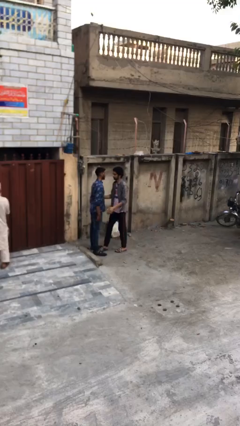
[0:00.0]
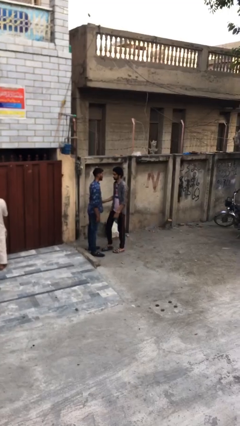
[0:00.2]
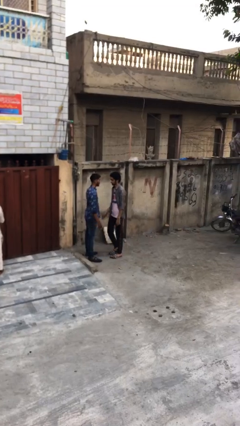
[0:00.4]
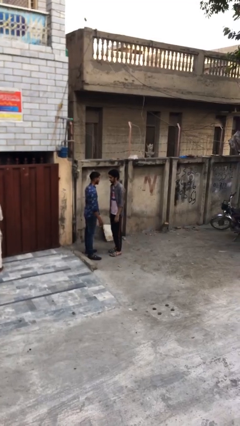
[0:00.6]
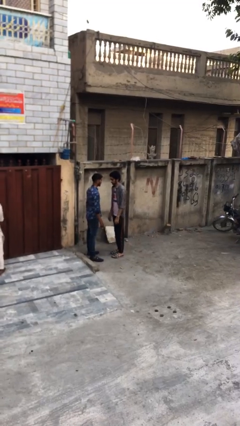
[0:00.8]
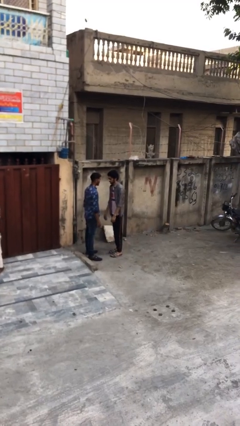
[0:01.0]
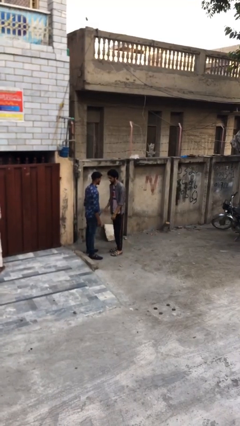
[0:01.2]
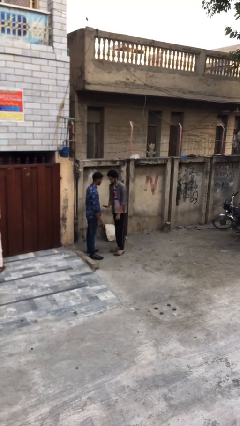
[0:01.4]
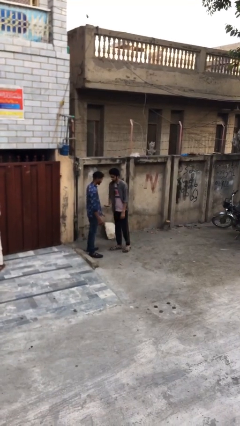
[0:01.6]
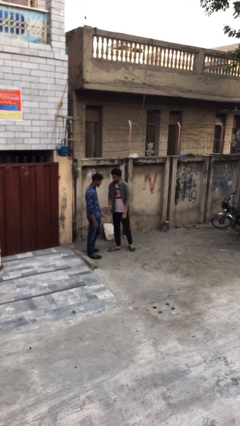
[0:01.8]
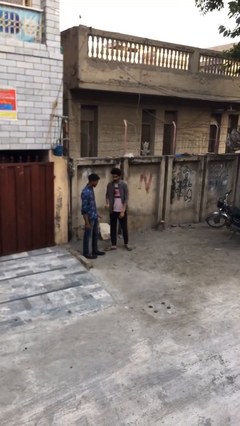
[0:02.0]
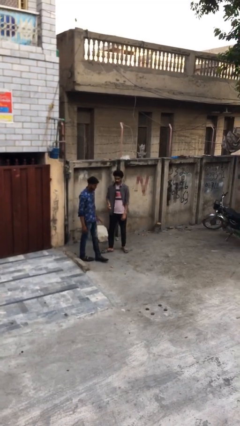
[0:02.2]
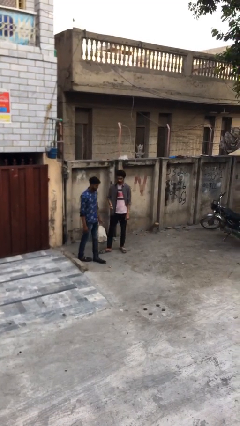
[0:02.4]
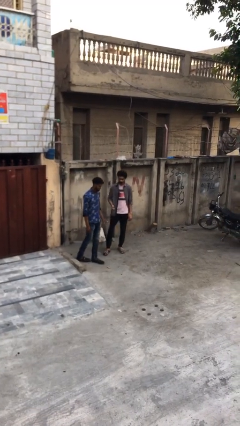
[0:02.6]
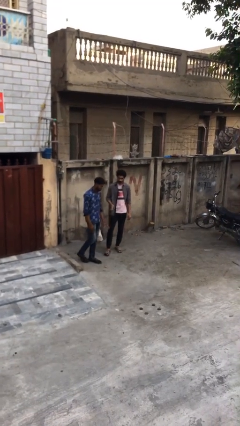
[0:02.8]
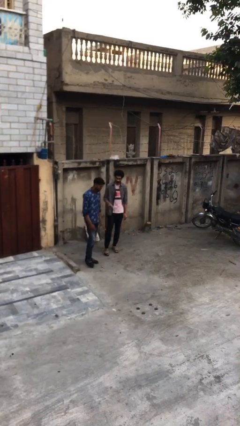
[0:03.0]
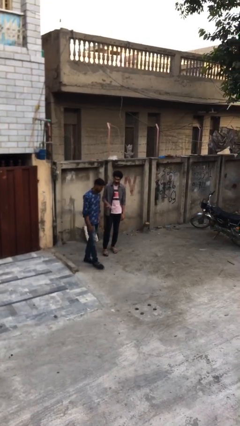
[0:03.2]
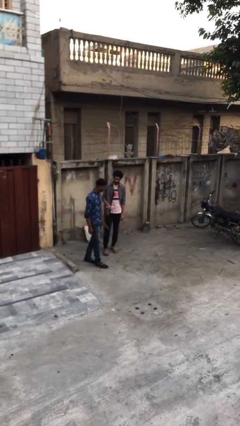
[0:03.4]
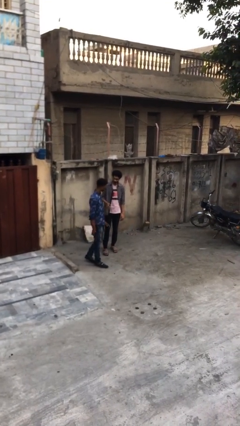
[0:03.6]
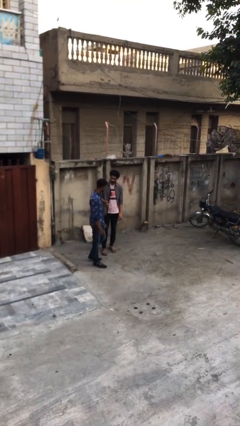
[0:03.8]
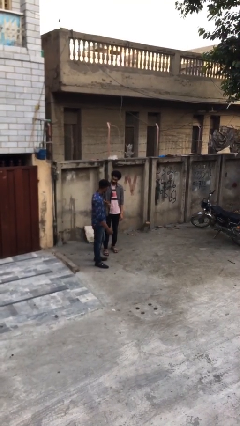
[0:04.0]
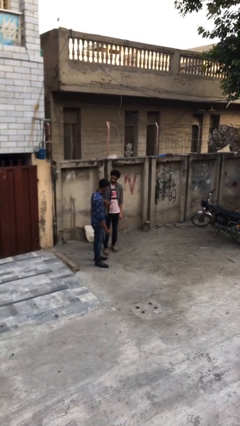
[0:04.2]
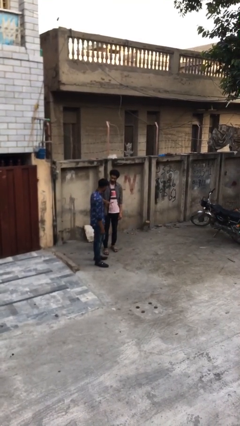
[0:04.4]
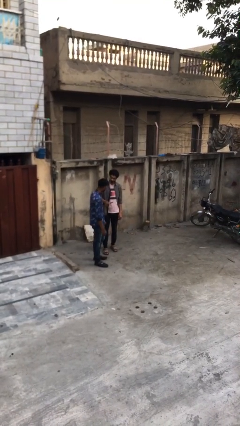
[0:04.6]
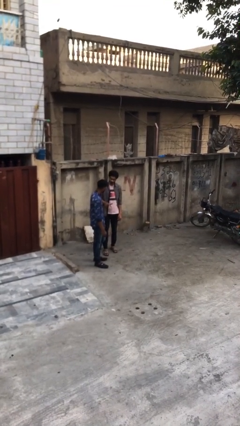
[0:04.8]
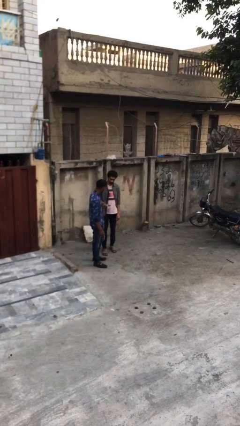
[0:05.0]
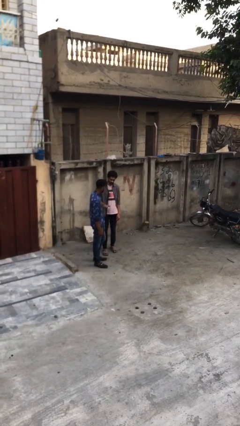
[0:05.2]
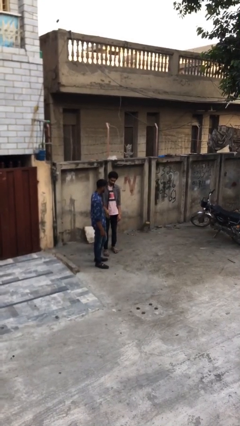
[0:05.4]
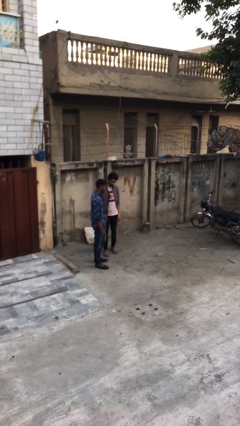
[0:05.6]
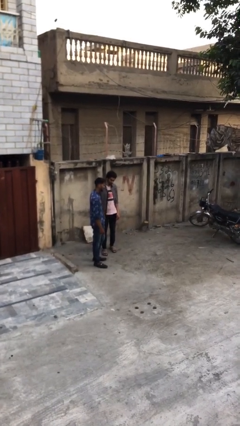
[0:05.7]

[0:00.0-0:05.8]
person talks to person

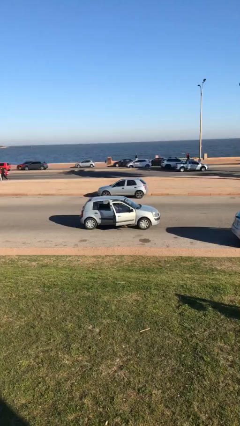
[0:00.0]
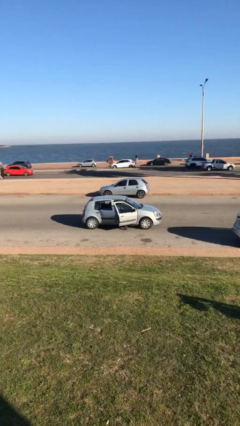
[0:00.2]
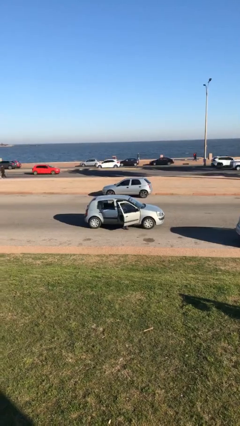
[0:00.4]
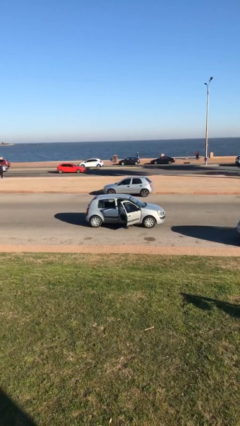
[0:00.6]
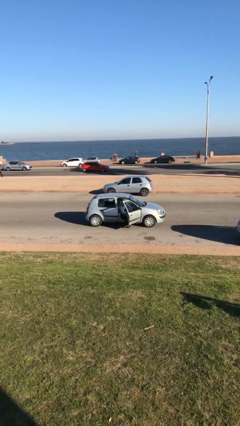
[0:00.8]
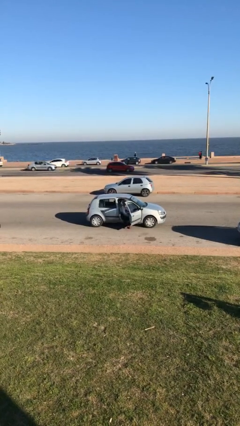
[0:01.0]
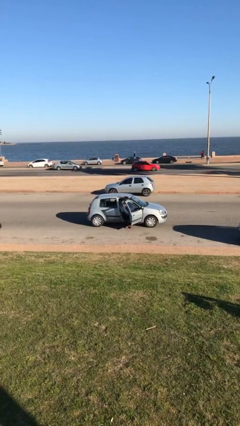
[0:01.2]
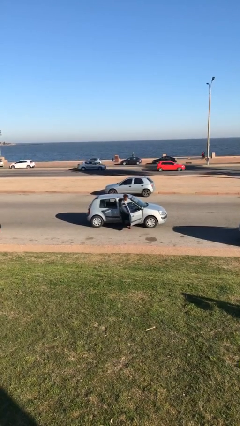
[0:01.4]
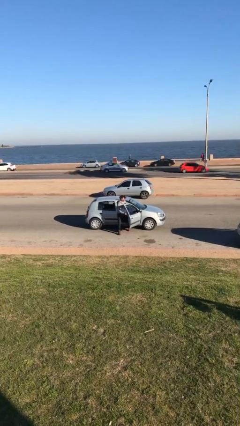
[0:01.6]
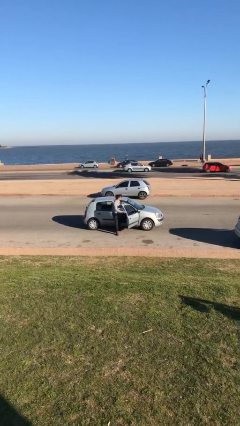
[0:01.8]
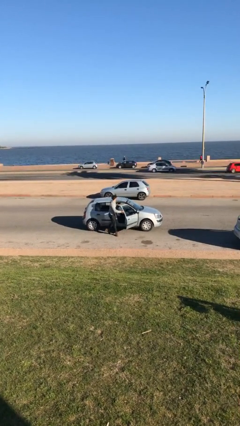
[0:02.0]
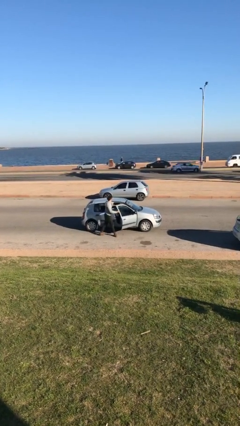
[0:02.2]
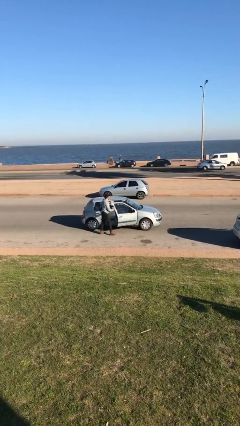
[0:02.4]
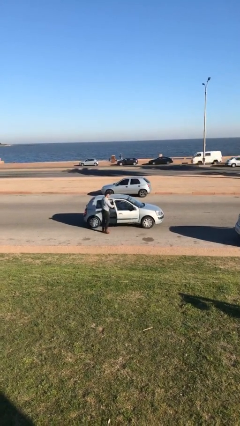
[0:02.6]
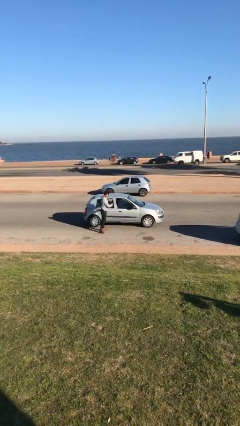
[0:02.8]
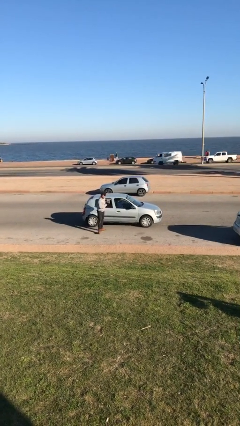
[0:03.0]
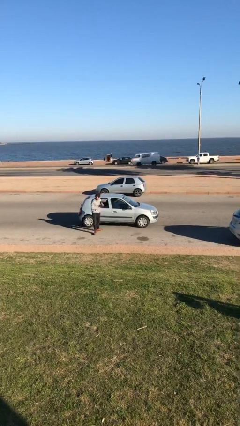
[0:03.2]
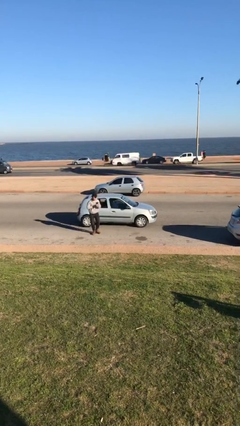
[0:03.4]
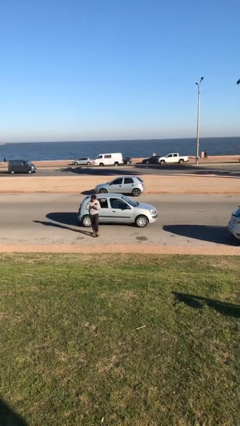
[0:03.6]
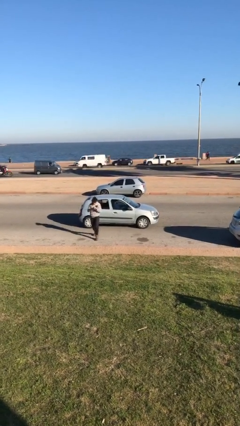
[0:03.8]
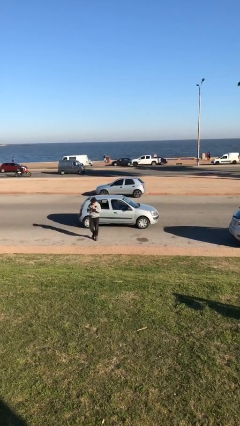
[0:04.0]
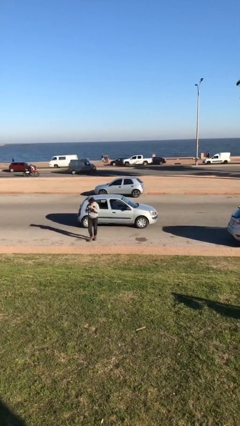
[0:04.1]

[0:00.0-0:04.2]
car drops off person

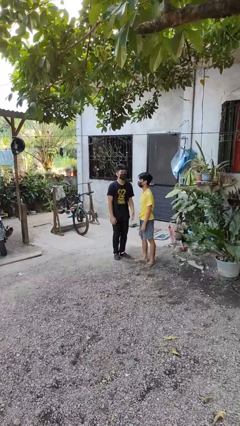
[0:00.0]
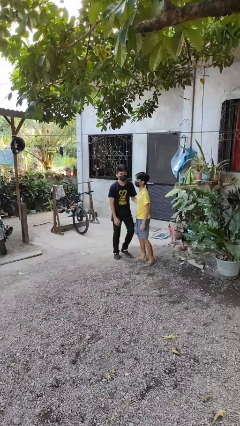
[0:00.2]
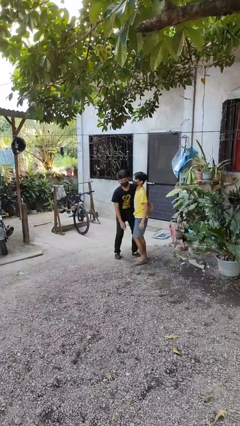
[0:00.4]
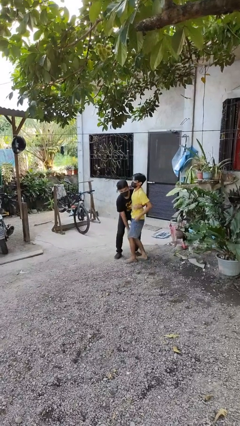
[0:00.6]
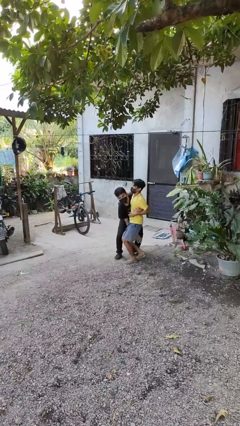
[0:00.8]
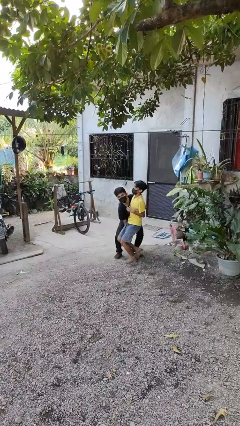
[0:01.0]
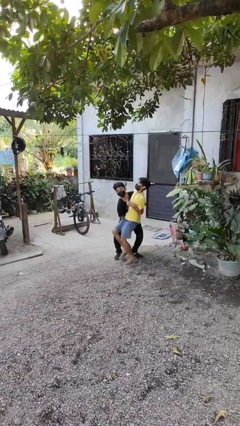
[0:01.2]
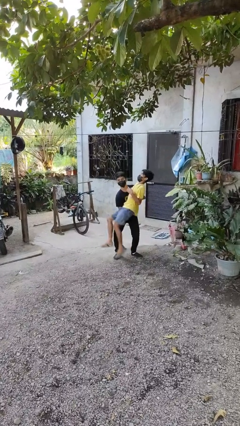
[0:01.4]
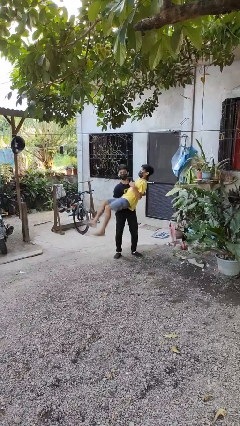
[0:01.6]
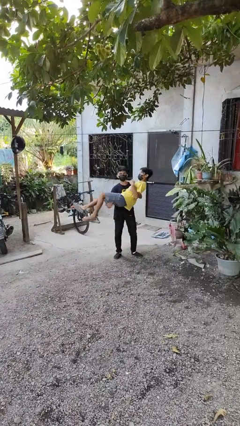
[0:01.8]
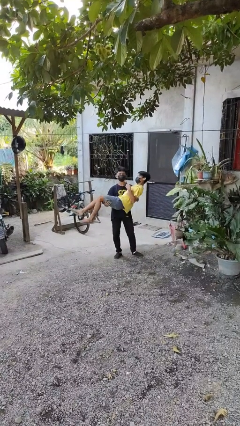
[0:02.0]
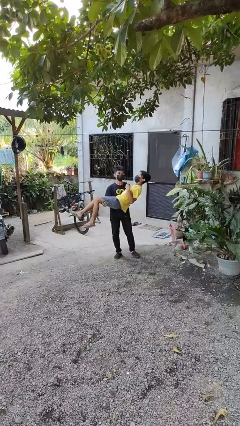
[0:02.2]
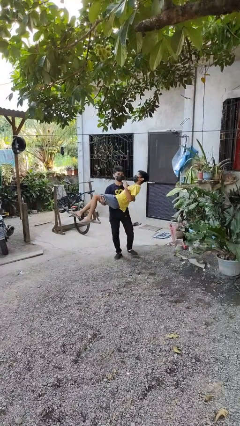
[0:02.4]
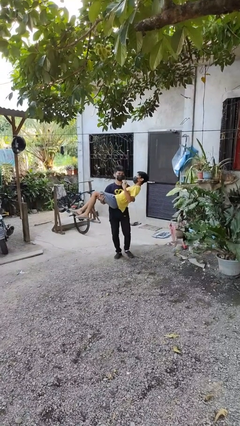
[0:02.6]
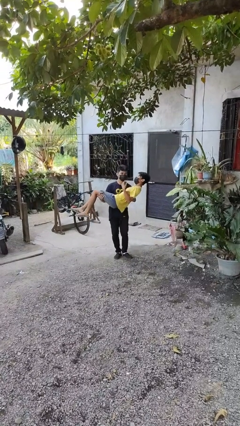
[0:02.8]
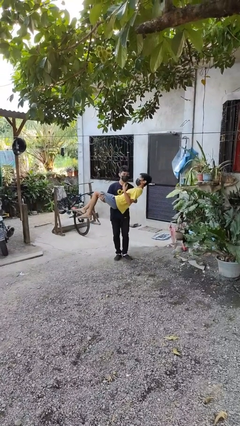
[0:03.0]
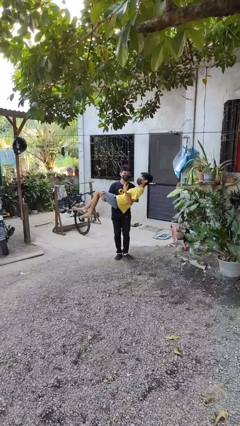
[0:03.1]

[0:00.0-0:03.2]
person picks up person

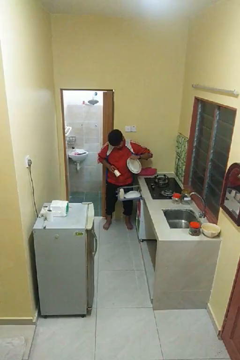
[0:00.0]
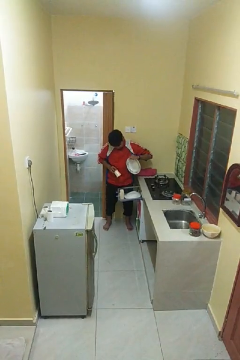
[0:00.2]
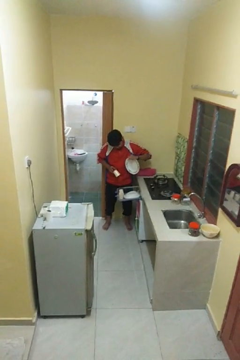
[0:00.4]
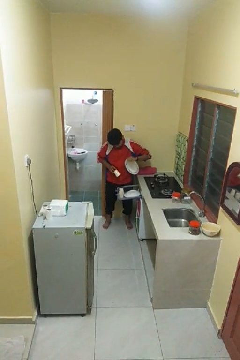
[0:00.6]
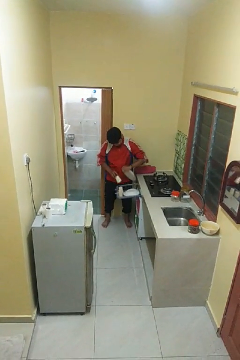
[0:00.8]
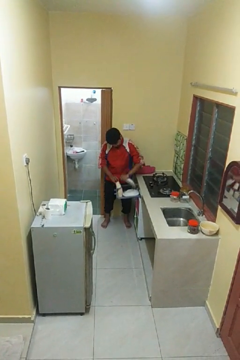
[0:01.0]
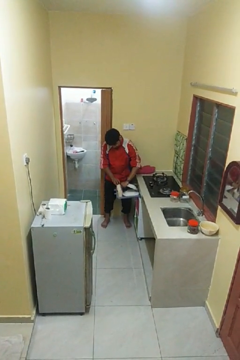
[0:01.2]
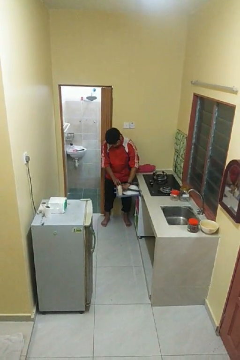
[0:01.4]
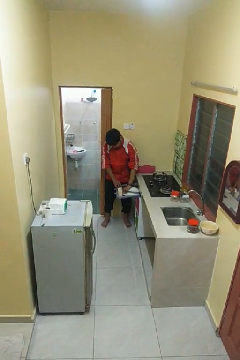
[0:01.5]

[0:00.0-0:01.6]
person puts object into kitchen drawer

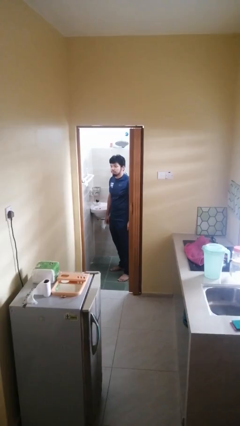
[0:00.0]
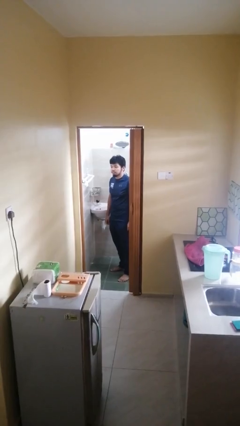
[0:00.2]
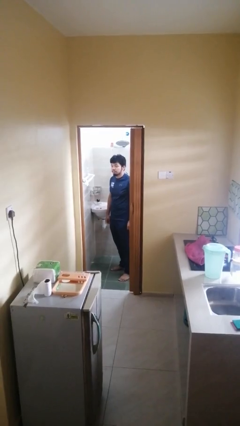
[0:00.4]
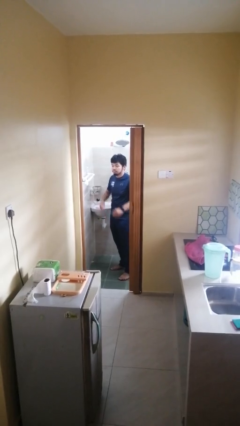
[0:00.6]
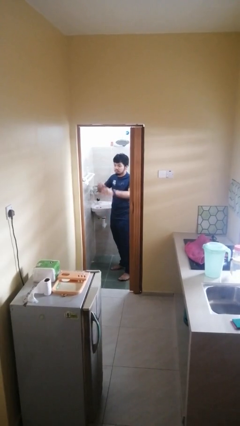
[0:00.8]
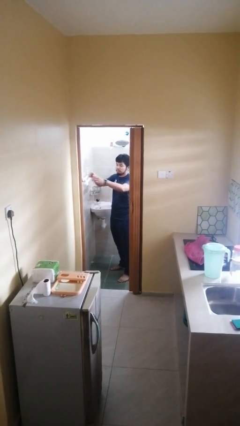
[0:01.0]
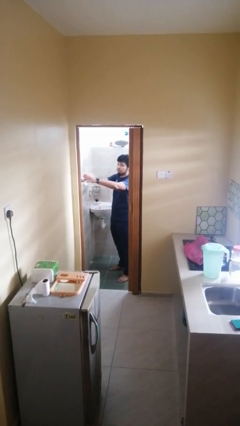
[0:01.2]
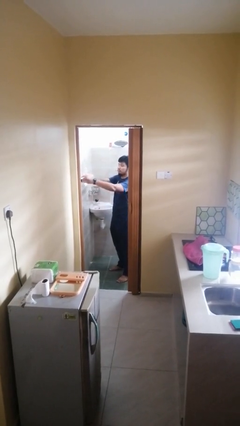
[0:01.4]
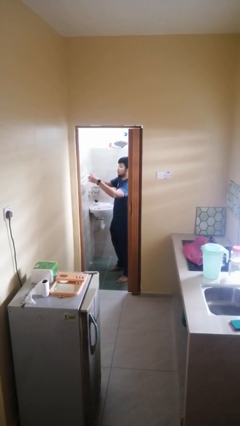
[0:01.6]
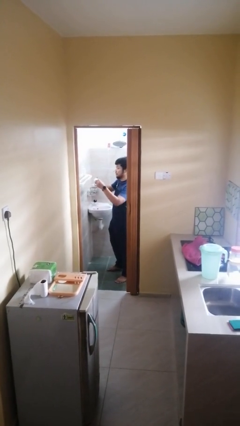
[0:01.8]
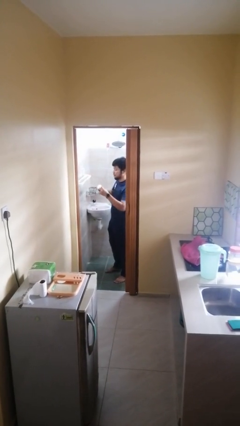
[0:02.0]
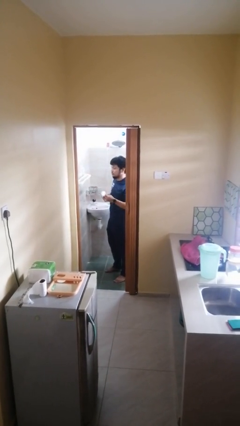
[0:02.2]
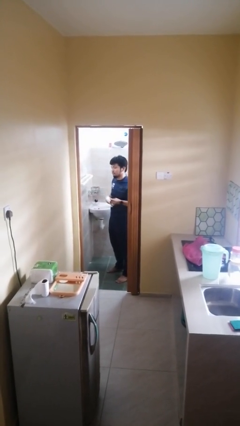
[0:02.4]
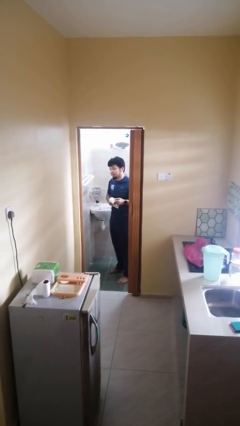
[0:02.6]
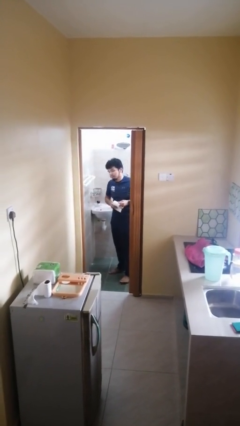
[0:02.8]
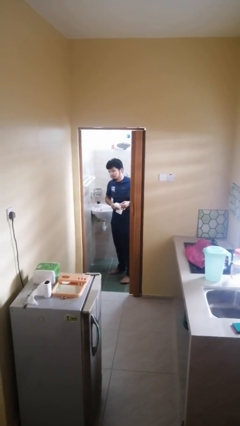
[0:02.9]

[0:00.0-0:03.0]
person picks up object from countertop
